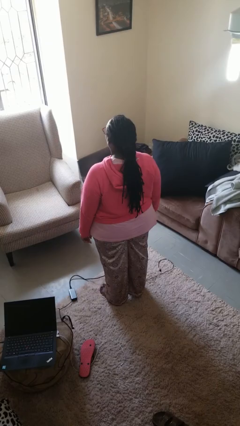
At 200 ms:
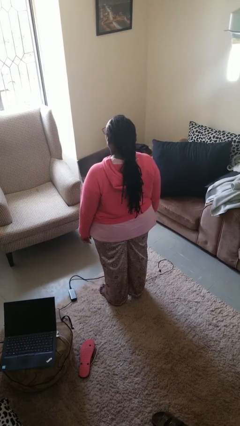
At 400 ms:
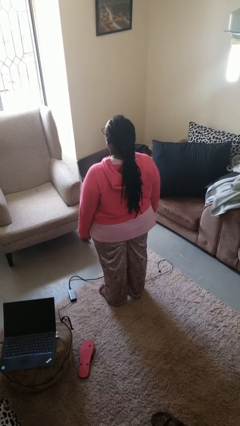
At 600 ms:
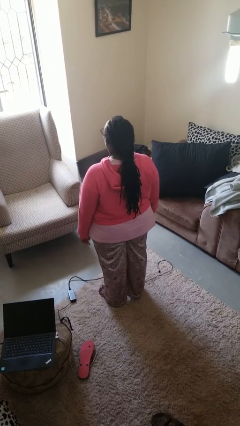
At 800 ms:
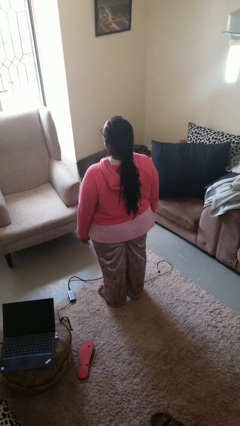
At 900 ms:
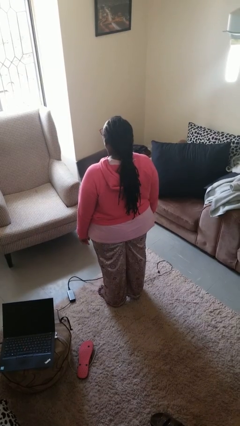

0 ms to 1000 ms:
person gestures listen closely

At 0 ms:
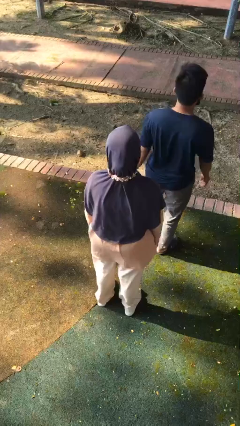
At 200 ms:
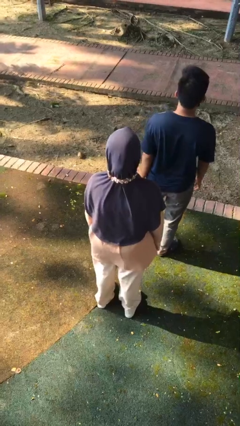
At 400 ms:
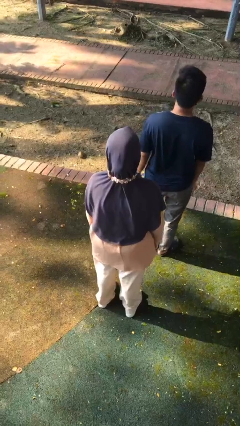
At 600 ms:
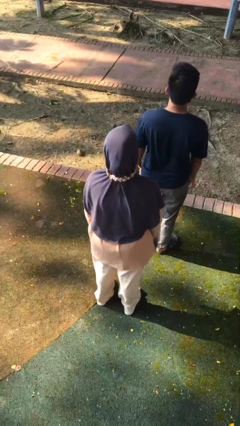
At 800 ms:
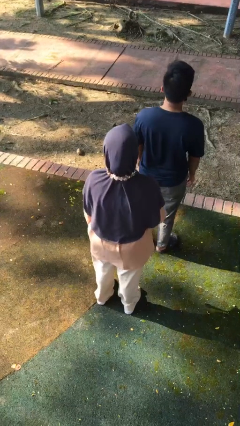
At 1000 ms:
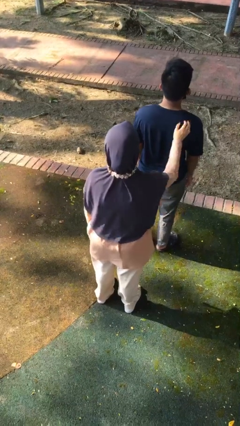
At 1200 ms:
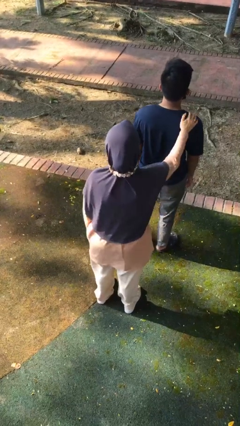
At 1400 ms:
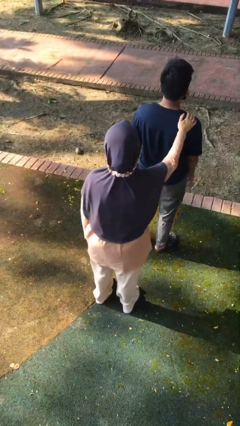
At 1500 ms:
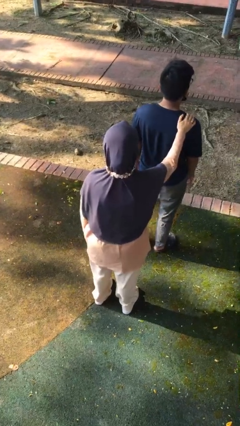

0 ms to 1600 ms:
person grabs person by shoulder

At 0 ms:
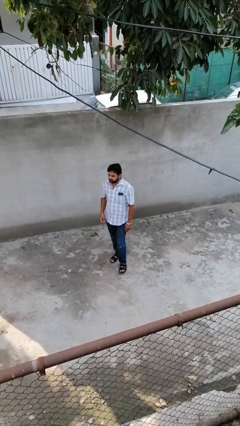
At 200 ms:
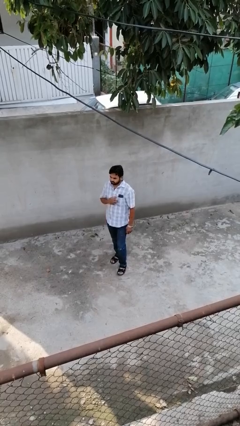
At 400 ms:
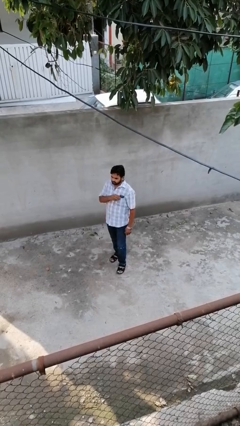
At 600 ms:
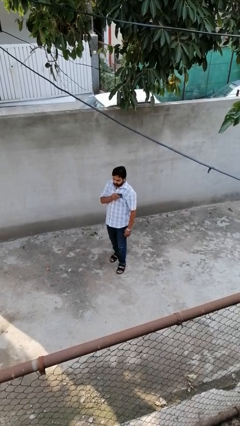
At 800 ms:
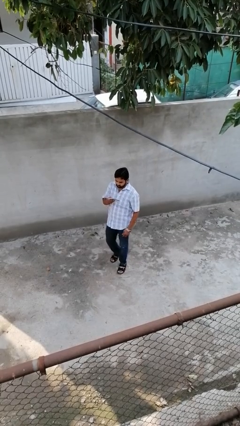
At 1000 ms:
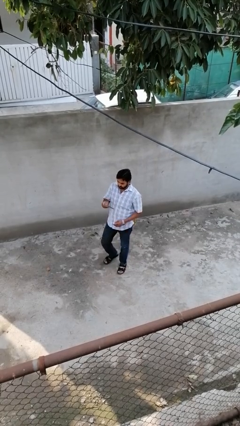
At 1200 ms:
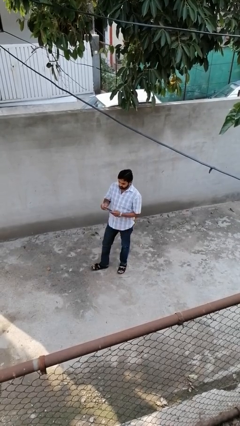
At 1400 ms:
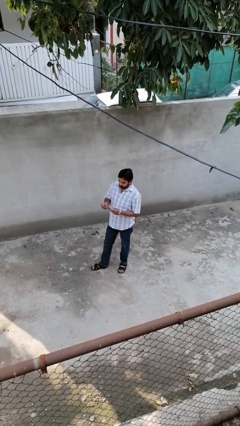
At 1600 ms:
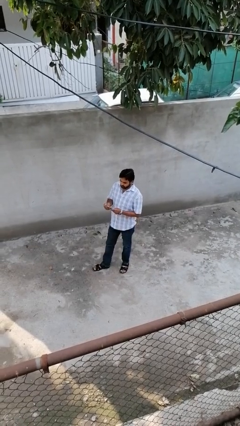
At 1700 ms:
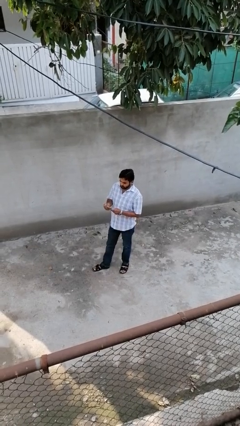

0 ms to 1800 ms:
person takes phone from pocket

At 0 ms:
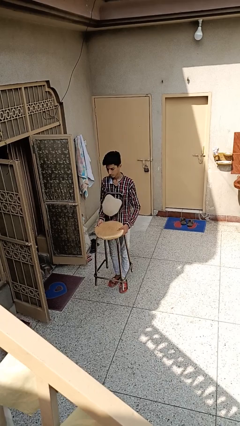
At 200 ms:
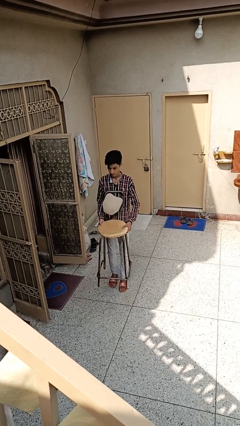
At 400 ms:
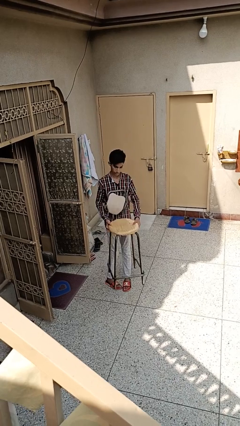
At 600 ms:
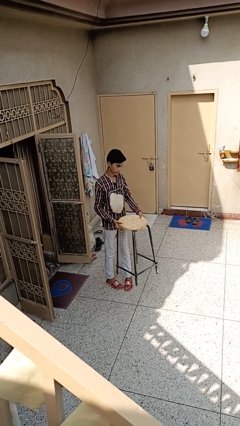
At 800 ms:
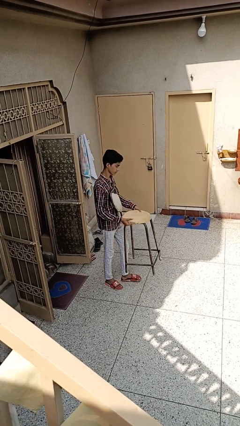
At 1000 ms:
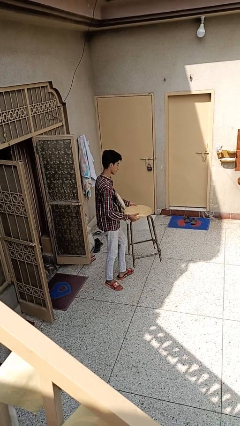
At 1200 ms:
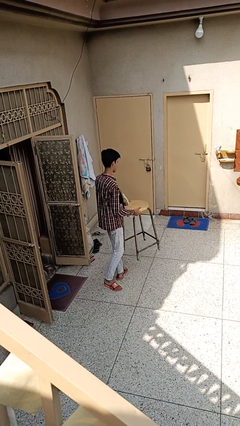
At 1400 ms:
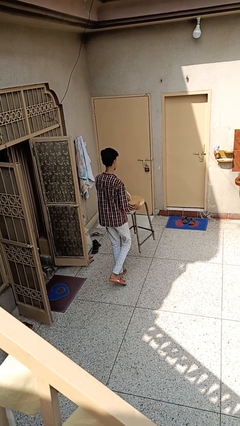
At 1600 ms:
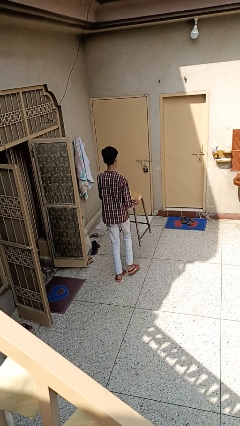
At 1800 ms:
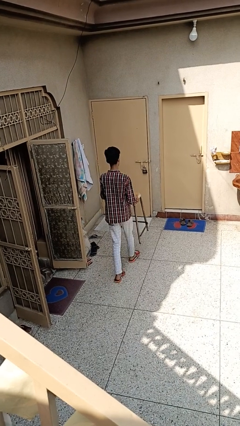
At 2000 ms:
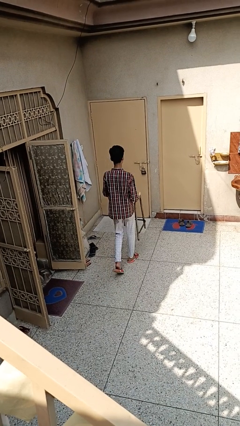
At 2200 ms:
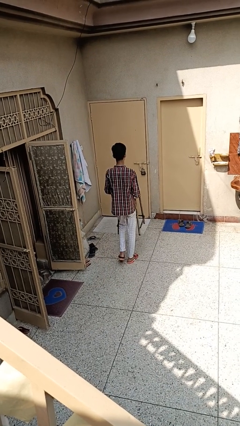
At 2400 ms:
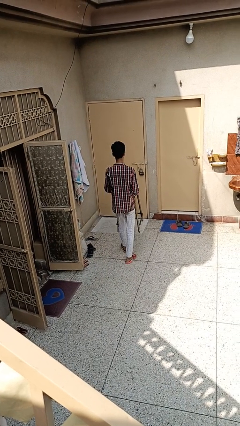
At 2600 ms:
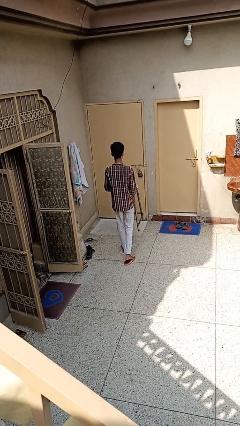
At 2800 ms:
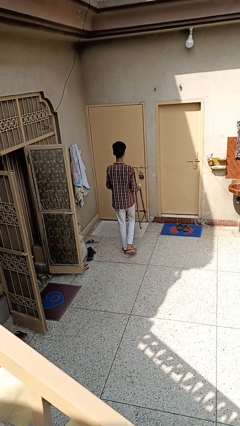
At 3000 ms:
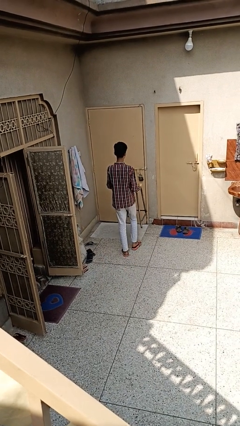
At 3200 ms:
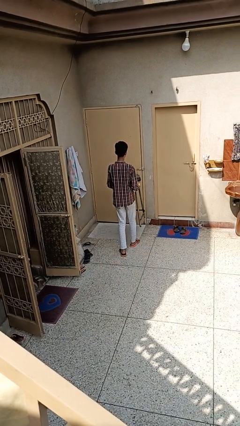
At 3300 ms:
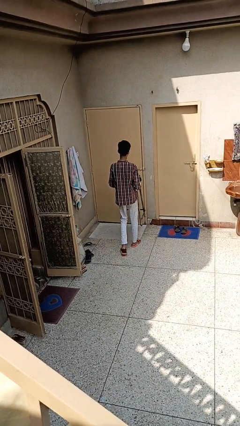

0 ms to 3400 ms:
person carries furniture

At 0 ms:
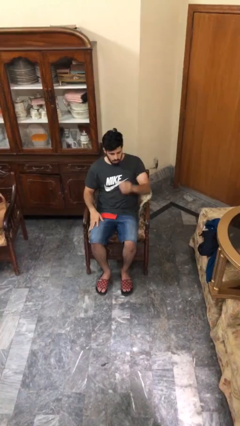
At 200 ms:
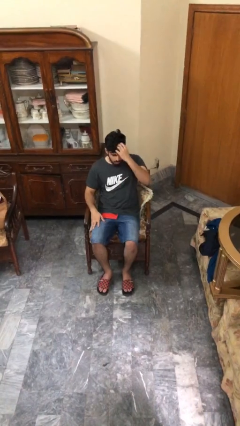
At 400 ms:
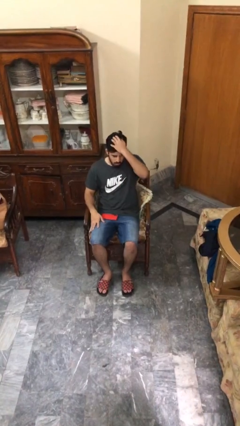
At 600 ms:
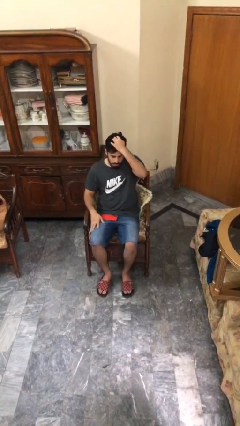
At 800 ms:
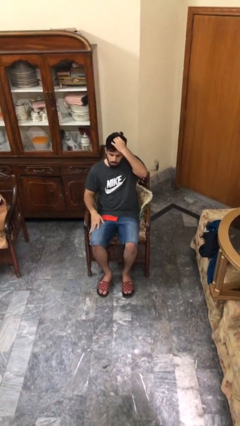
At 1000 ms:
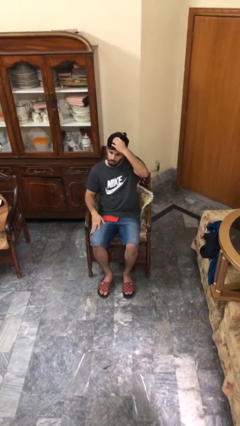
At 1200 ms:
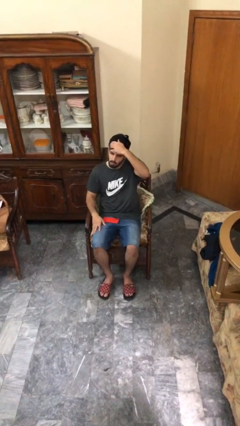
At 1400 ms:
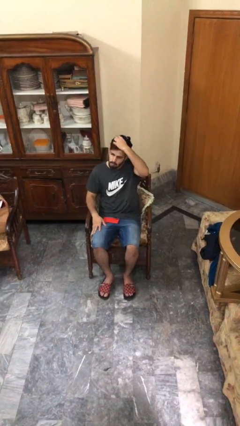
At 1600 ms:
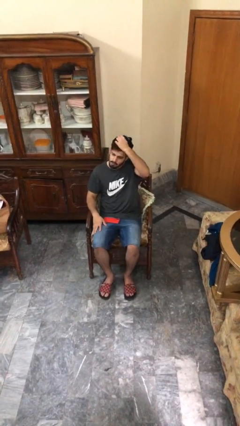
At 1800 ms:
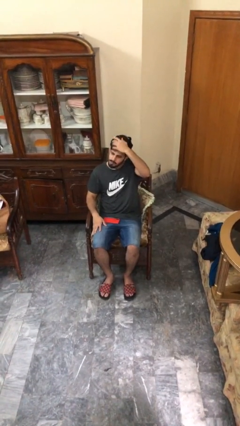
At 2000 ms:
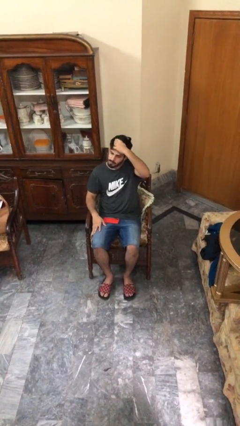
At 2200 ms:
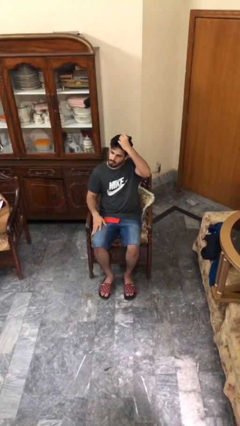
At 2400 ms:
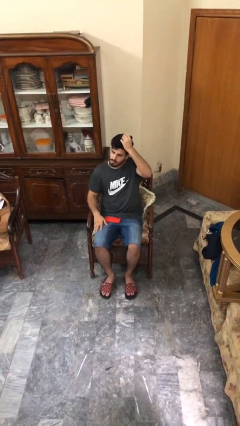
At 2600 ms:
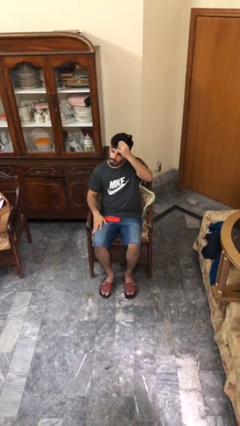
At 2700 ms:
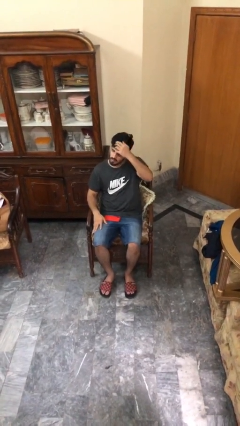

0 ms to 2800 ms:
person strokes hair

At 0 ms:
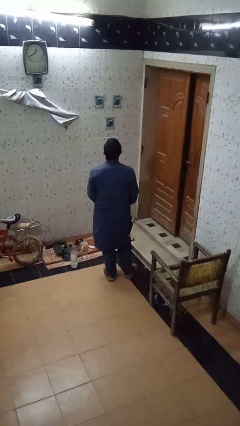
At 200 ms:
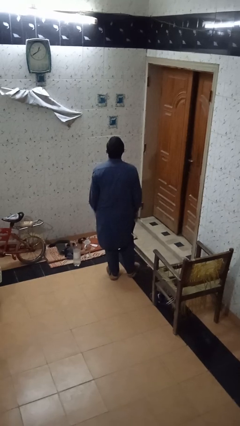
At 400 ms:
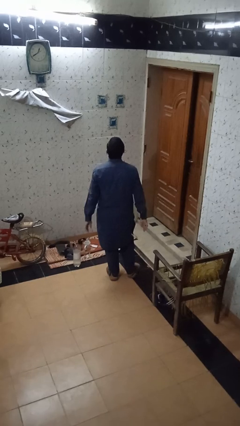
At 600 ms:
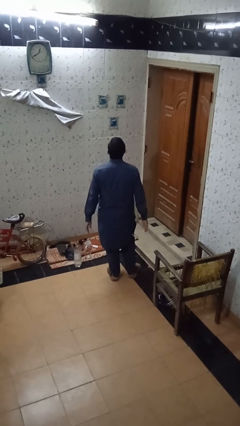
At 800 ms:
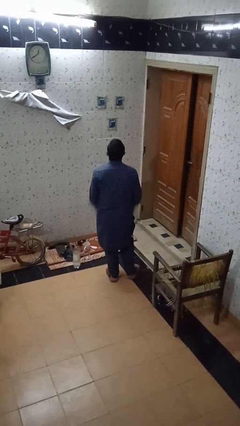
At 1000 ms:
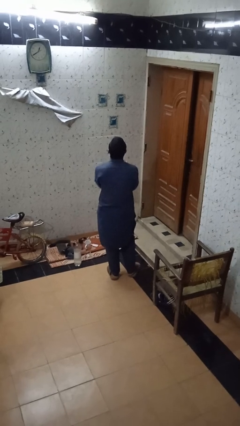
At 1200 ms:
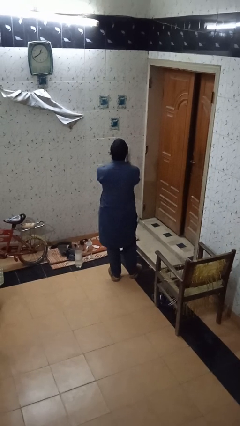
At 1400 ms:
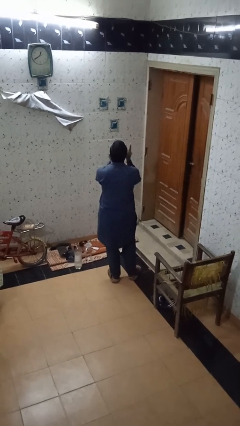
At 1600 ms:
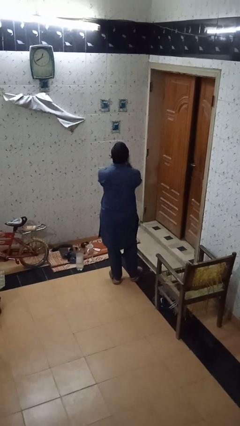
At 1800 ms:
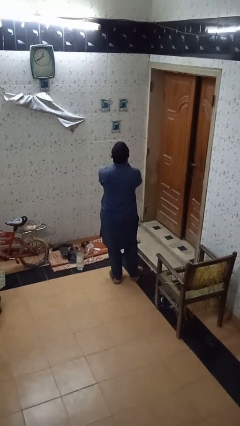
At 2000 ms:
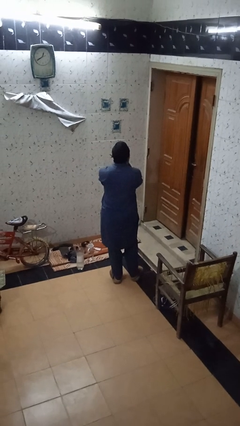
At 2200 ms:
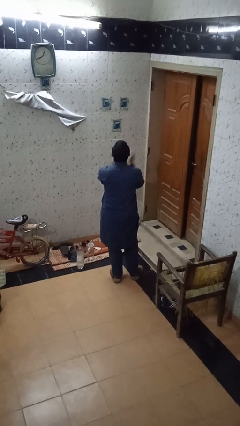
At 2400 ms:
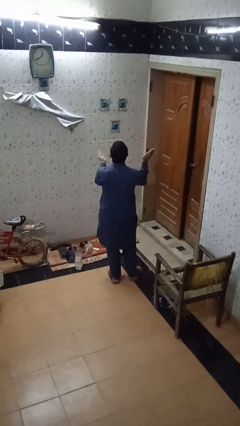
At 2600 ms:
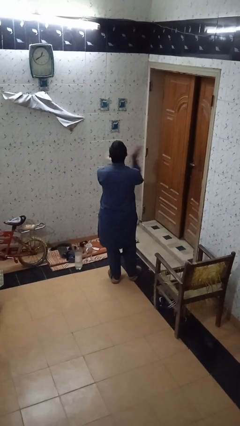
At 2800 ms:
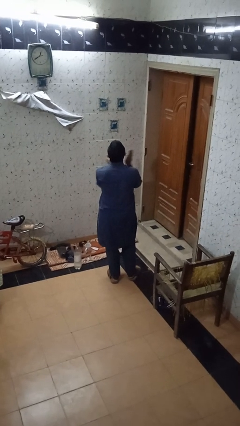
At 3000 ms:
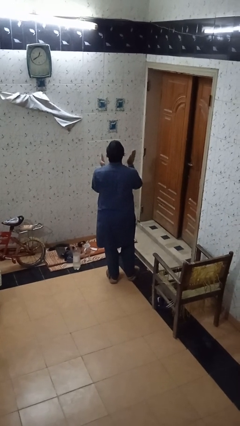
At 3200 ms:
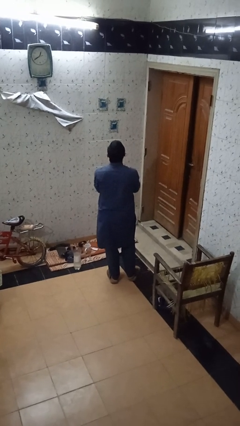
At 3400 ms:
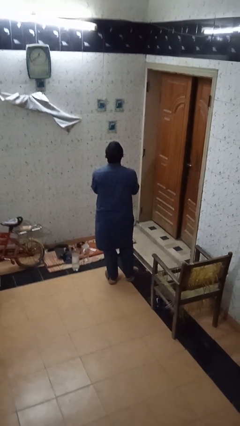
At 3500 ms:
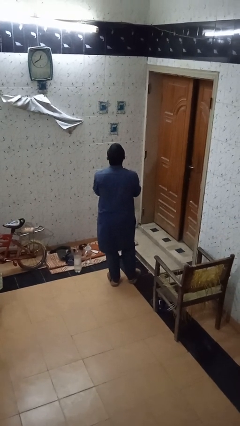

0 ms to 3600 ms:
person claps hands

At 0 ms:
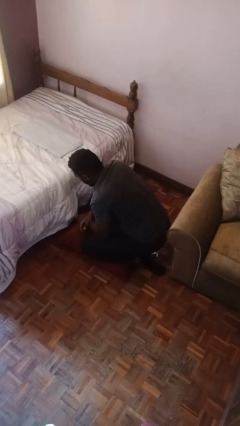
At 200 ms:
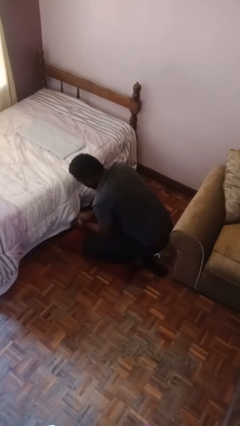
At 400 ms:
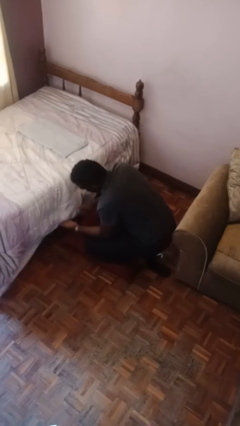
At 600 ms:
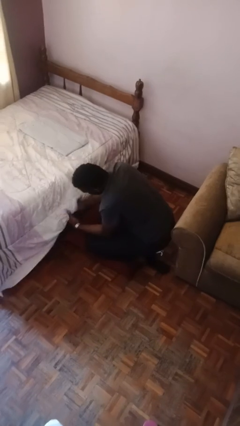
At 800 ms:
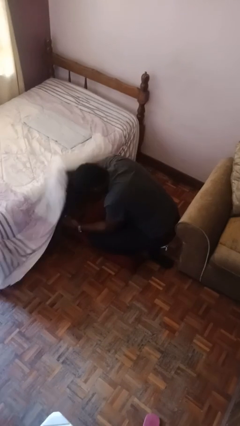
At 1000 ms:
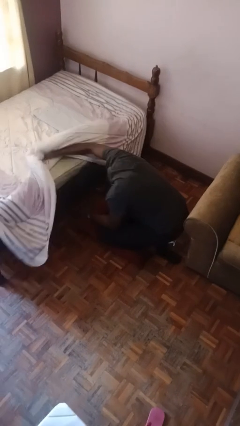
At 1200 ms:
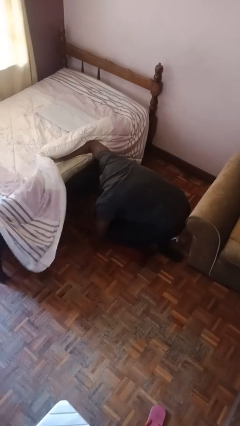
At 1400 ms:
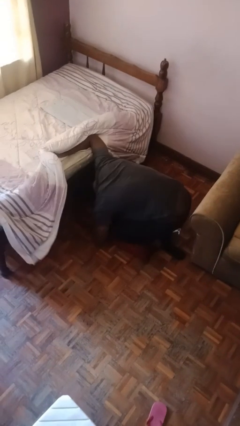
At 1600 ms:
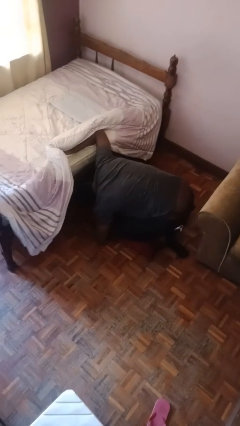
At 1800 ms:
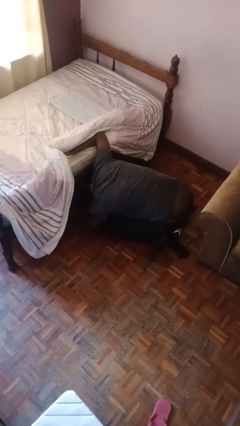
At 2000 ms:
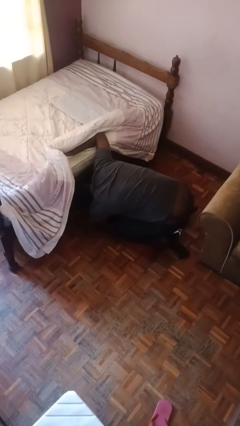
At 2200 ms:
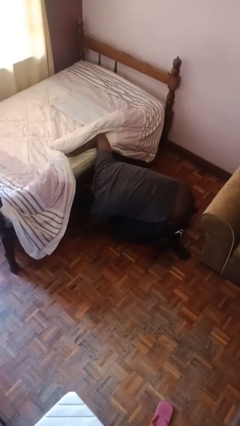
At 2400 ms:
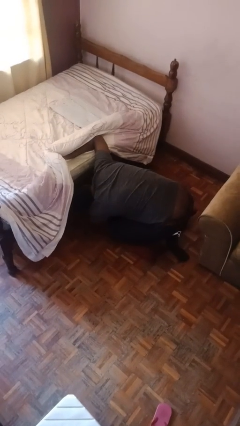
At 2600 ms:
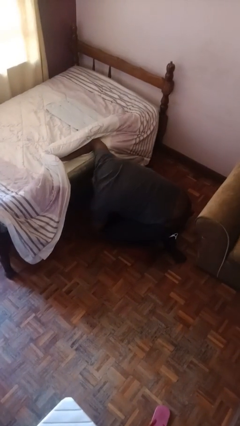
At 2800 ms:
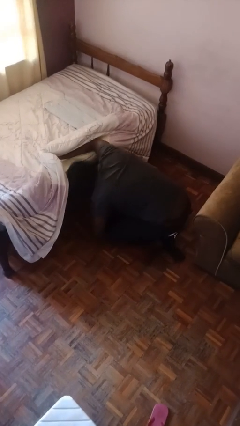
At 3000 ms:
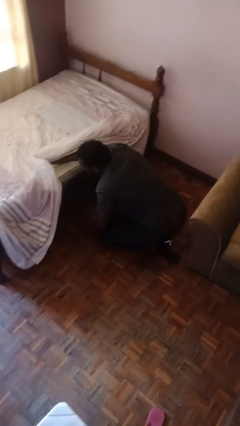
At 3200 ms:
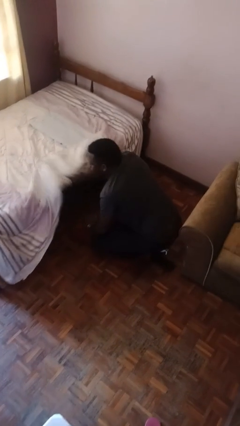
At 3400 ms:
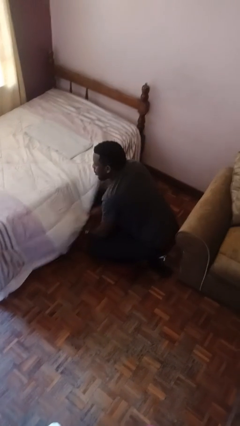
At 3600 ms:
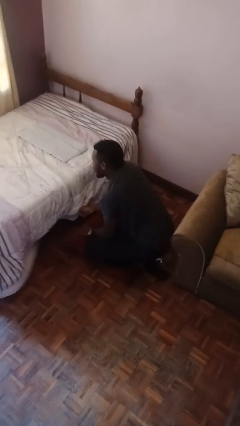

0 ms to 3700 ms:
person searches under bed
